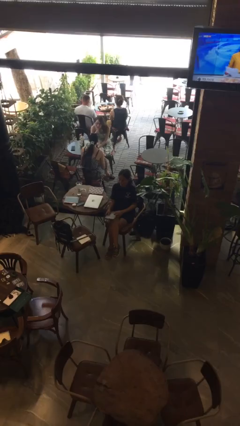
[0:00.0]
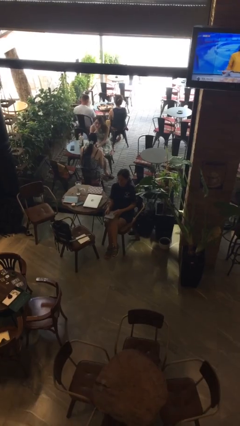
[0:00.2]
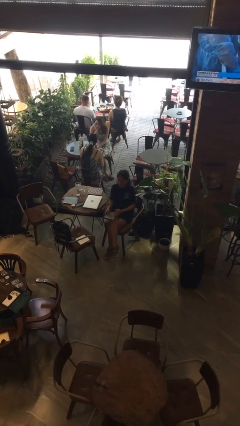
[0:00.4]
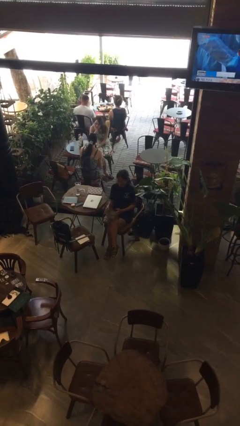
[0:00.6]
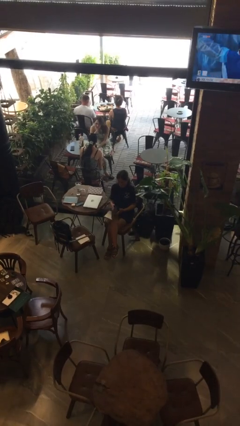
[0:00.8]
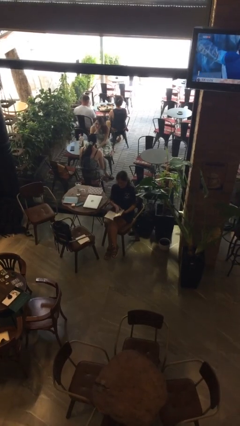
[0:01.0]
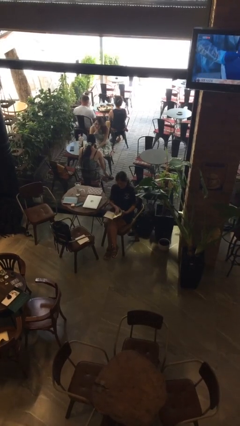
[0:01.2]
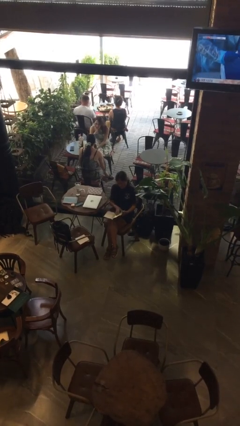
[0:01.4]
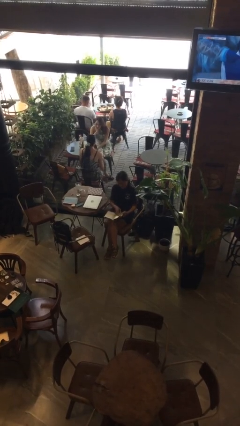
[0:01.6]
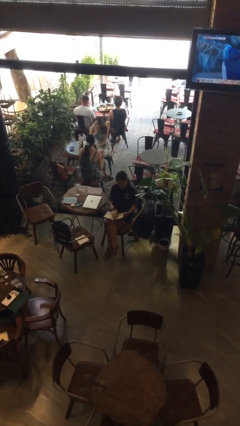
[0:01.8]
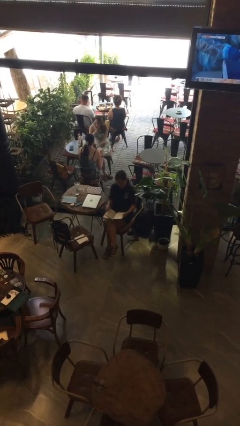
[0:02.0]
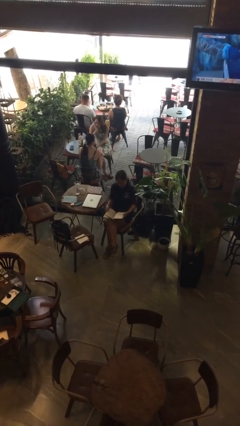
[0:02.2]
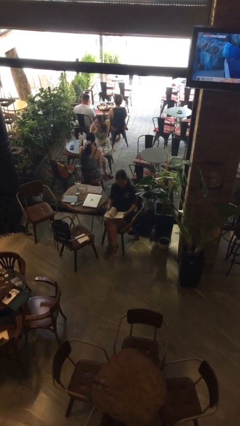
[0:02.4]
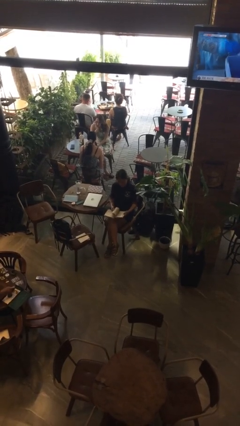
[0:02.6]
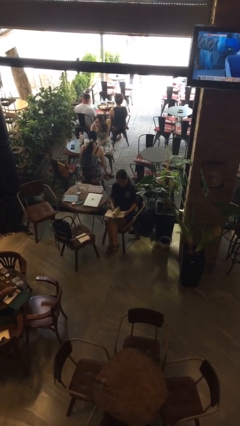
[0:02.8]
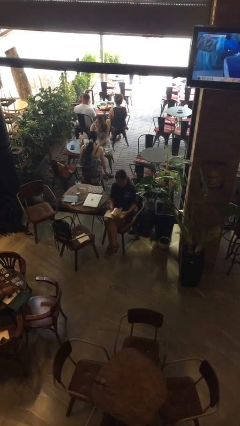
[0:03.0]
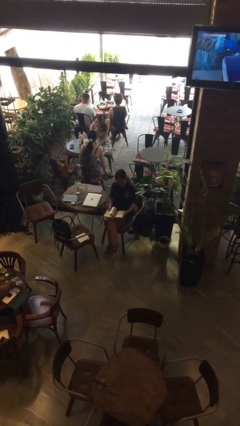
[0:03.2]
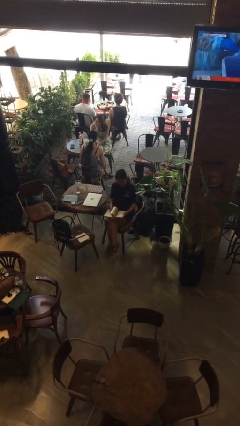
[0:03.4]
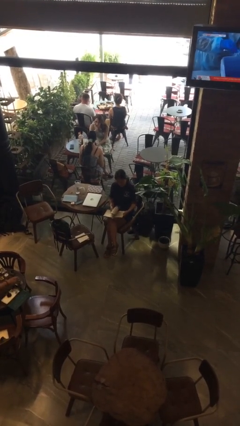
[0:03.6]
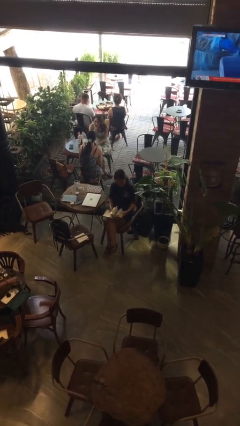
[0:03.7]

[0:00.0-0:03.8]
person reads book

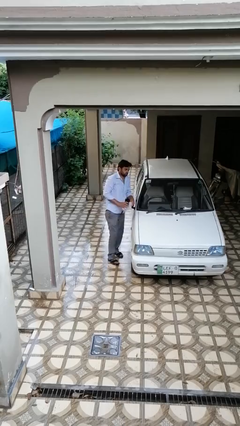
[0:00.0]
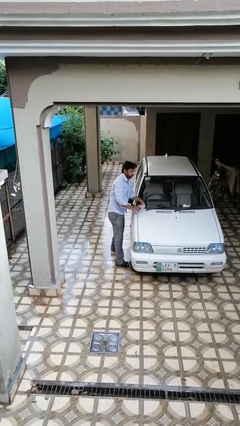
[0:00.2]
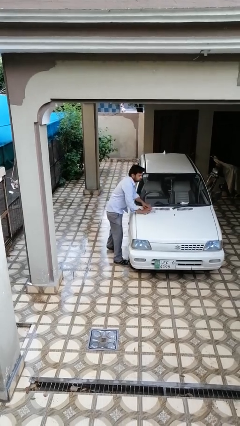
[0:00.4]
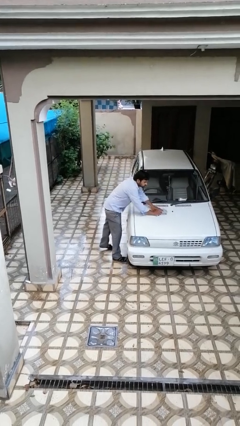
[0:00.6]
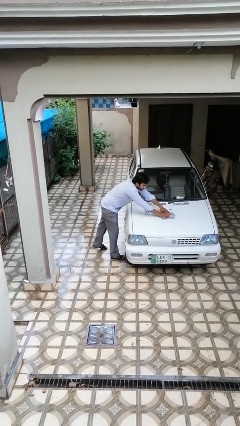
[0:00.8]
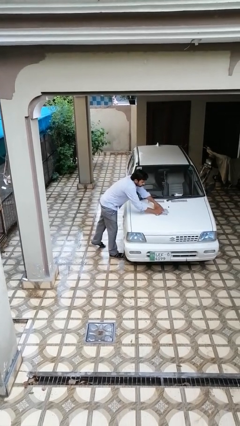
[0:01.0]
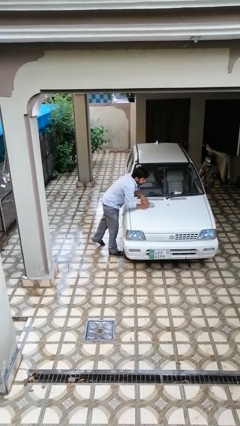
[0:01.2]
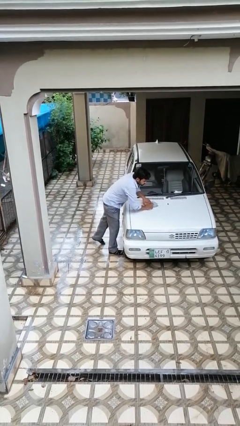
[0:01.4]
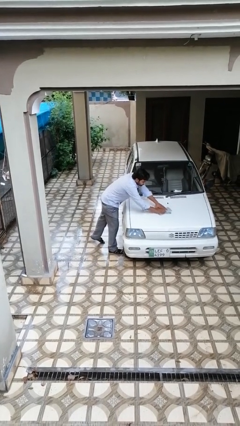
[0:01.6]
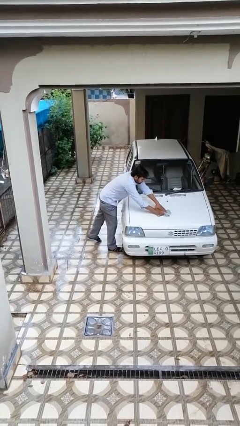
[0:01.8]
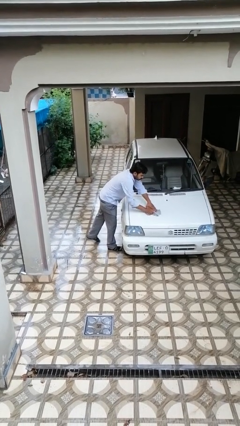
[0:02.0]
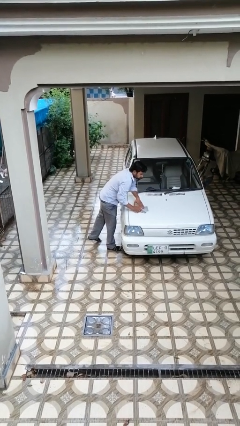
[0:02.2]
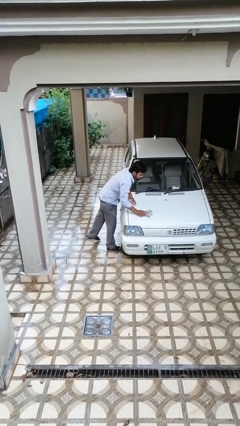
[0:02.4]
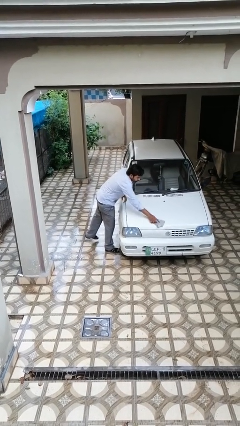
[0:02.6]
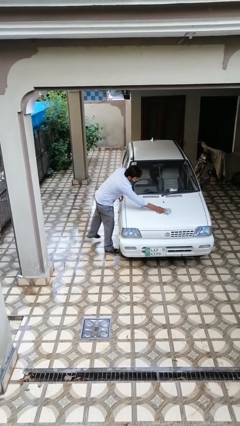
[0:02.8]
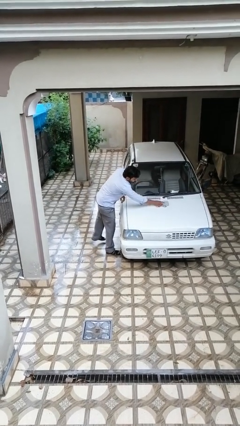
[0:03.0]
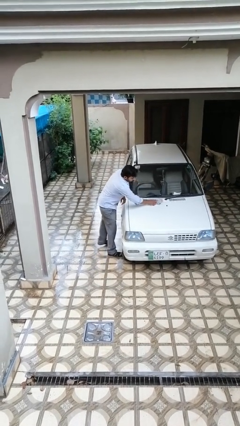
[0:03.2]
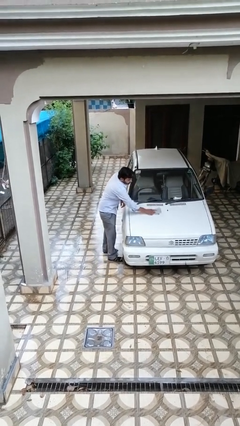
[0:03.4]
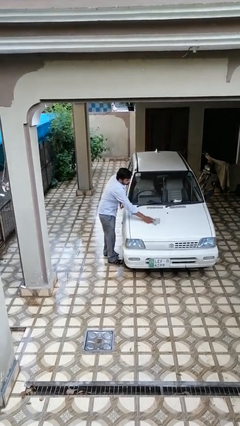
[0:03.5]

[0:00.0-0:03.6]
person polishes car with rag

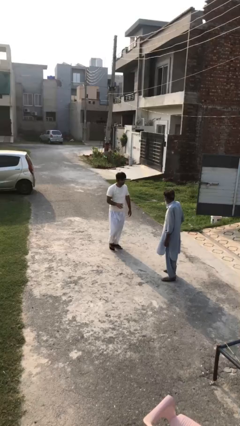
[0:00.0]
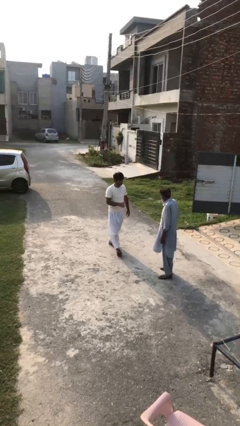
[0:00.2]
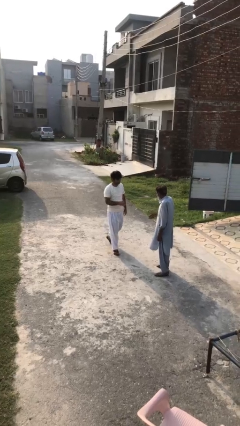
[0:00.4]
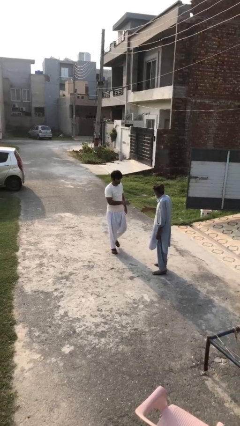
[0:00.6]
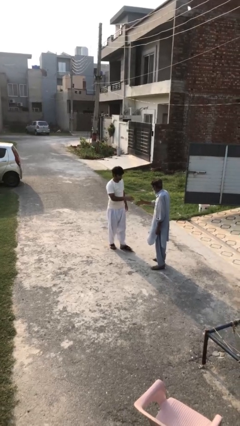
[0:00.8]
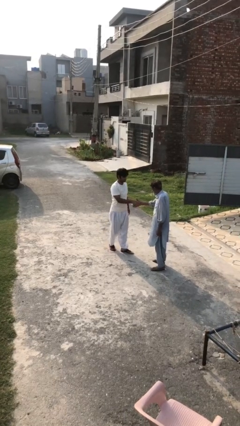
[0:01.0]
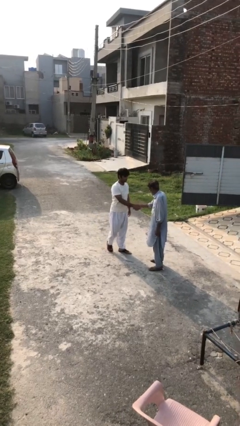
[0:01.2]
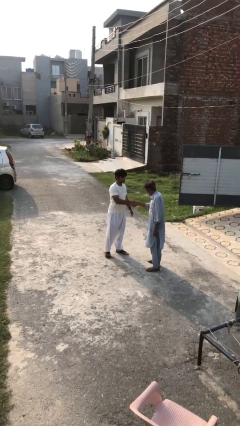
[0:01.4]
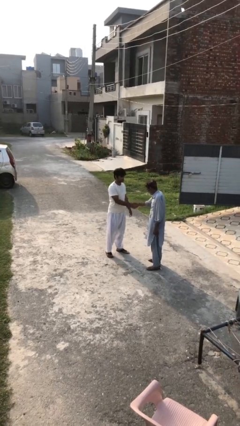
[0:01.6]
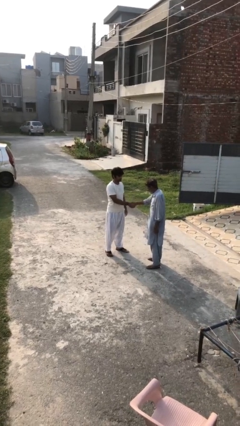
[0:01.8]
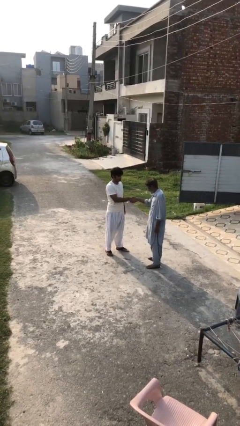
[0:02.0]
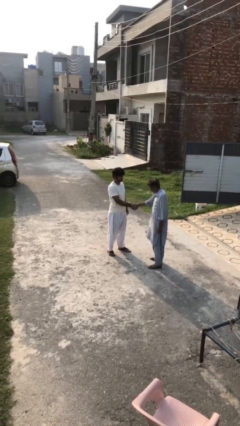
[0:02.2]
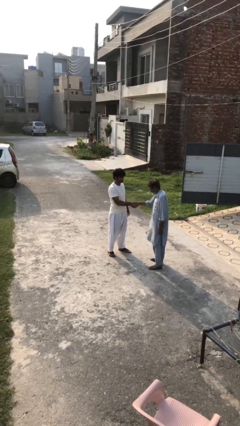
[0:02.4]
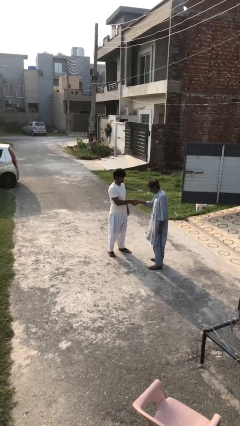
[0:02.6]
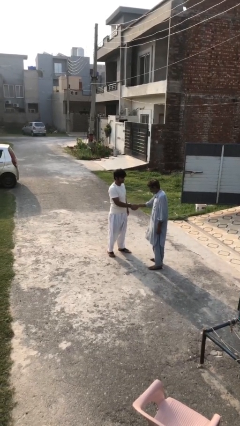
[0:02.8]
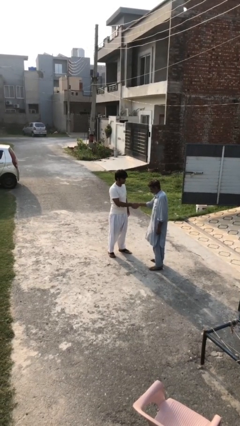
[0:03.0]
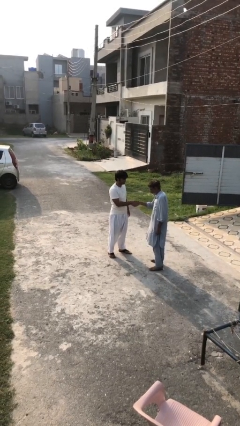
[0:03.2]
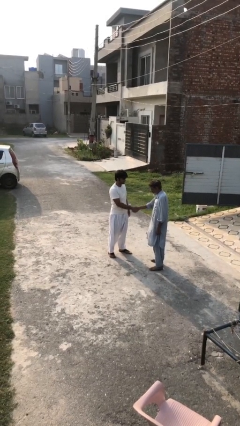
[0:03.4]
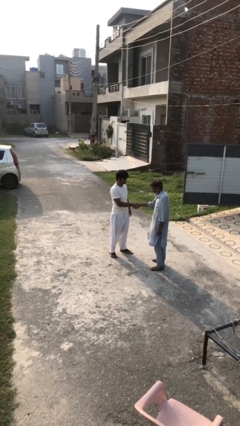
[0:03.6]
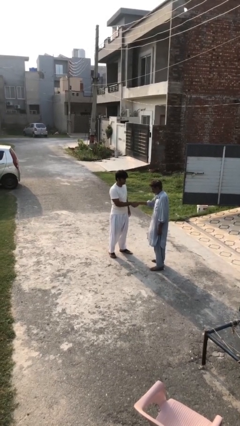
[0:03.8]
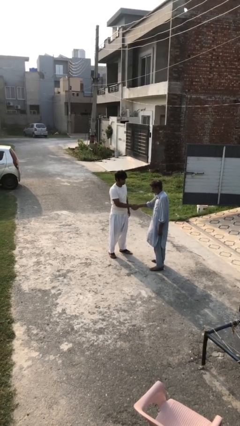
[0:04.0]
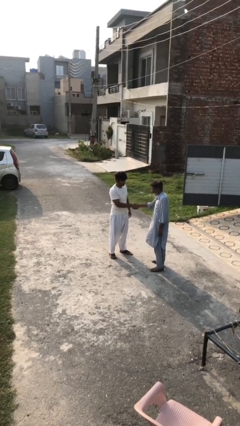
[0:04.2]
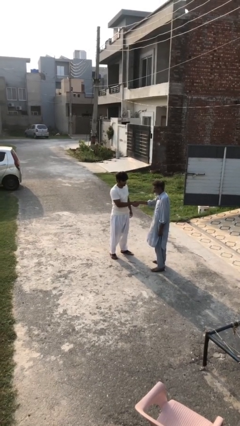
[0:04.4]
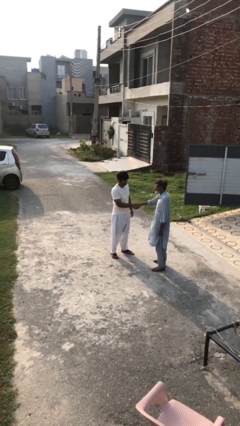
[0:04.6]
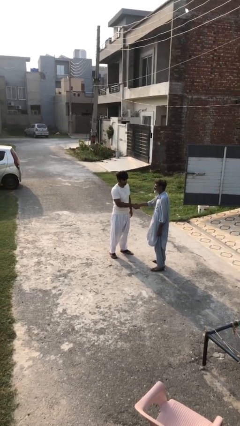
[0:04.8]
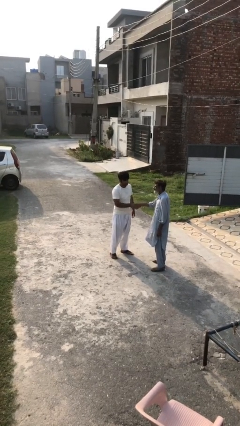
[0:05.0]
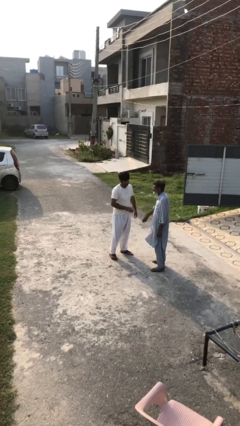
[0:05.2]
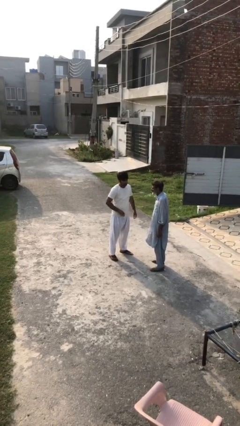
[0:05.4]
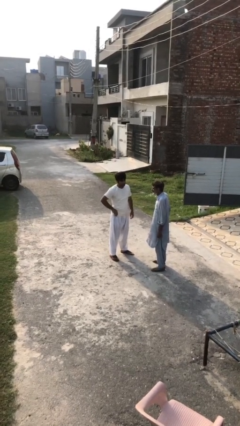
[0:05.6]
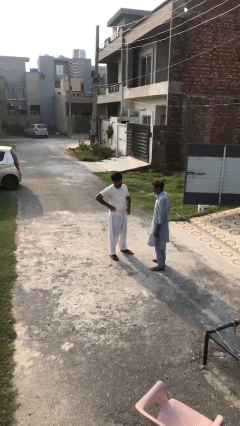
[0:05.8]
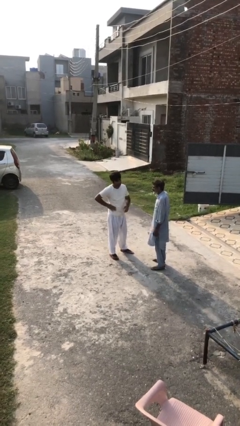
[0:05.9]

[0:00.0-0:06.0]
person shakes hand

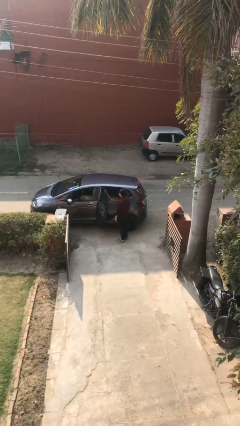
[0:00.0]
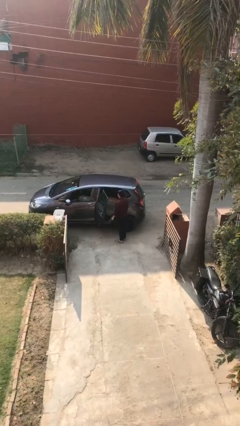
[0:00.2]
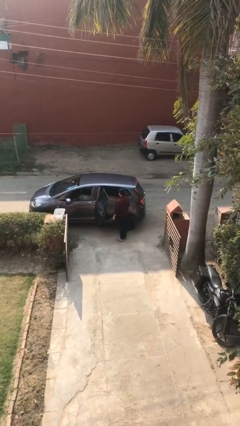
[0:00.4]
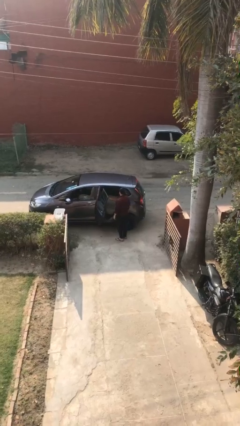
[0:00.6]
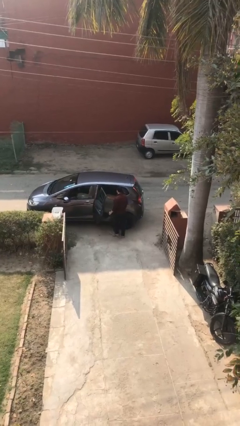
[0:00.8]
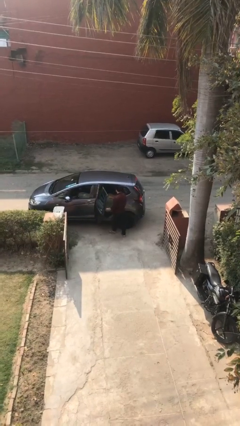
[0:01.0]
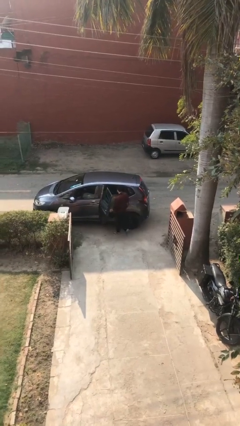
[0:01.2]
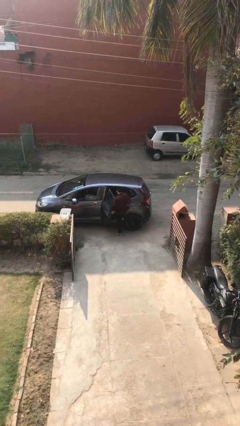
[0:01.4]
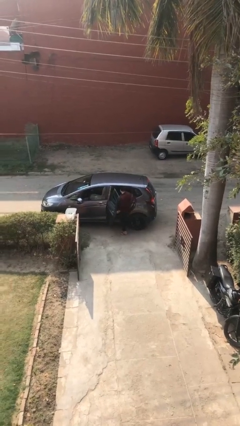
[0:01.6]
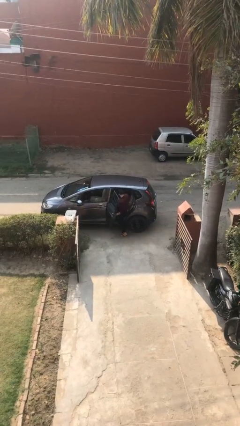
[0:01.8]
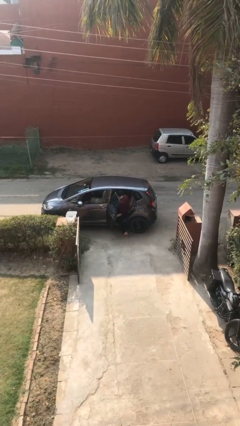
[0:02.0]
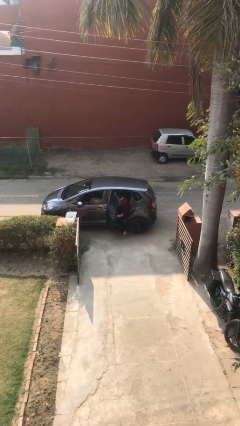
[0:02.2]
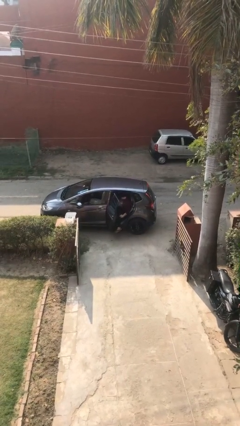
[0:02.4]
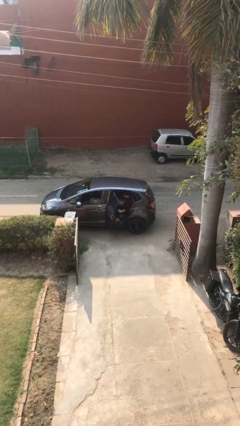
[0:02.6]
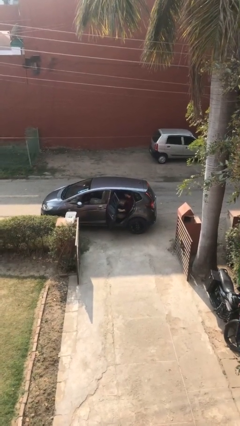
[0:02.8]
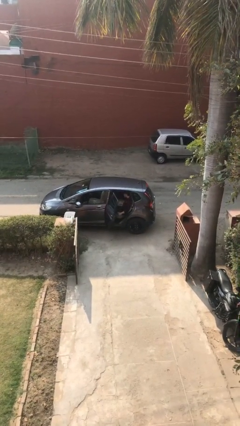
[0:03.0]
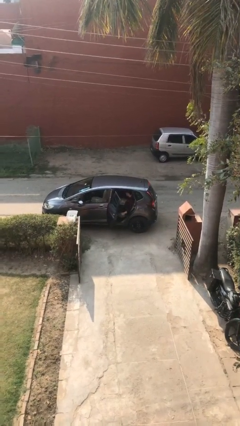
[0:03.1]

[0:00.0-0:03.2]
person enters car

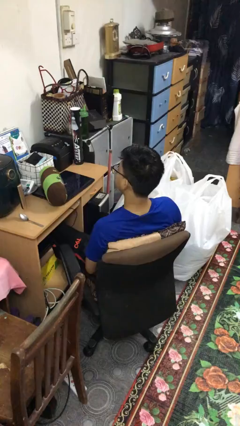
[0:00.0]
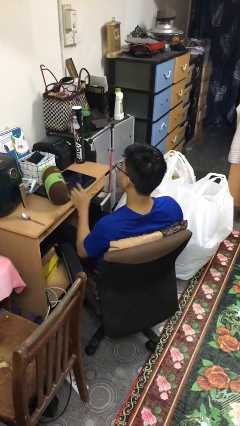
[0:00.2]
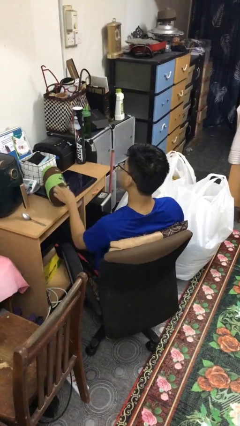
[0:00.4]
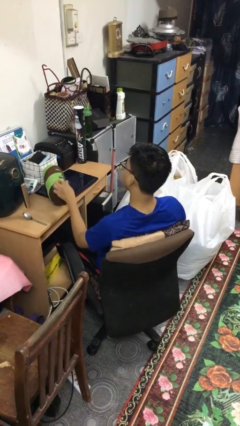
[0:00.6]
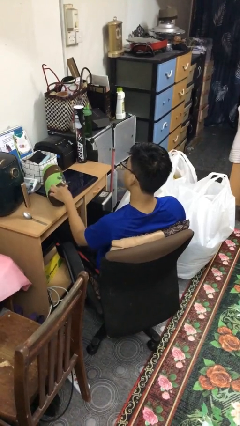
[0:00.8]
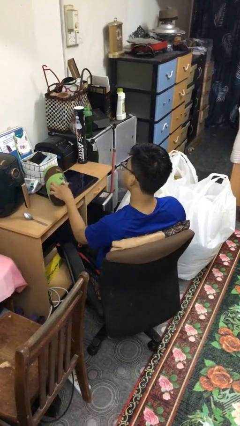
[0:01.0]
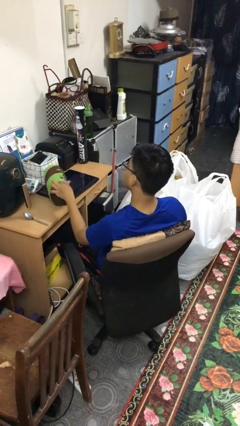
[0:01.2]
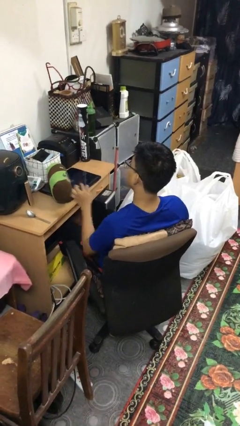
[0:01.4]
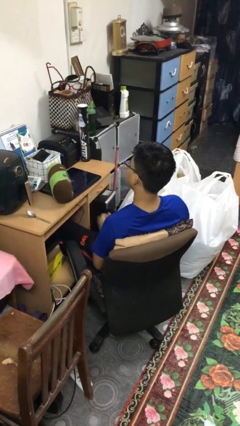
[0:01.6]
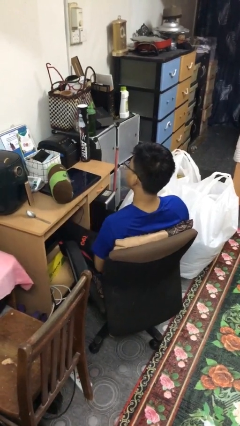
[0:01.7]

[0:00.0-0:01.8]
person taps object with finger
